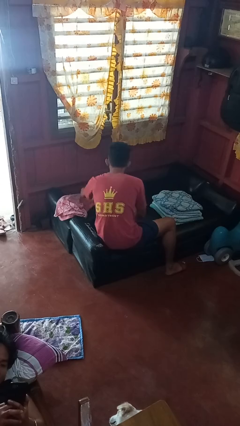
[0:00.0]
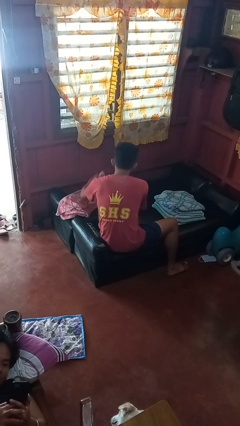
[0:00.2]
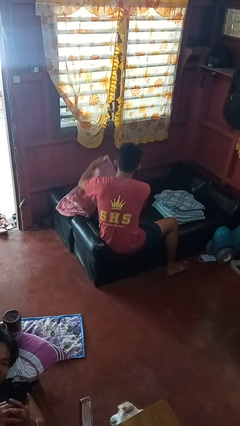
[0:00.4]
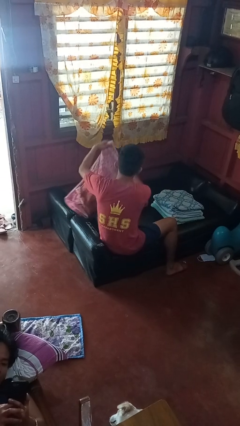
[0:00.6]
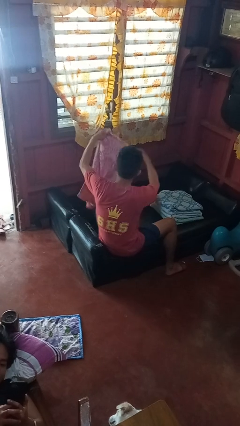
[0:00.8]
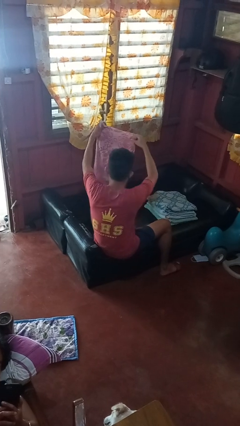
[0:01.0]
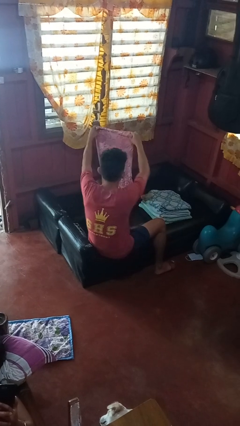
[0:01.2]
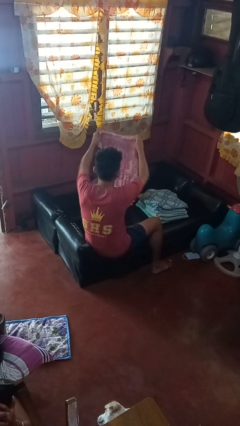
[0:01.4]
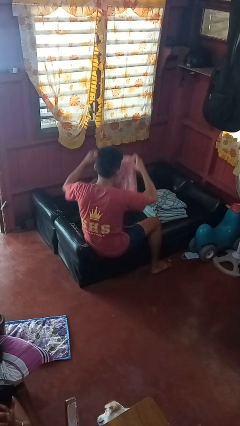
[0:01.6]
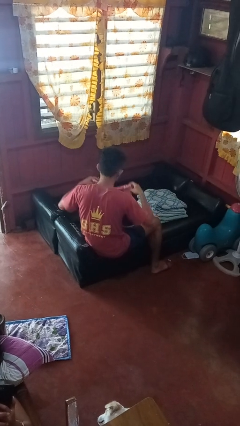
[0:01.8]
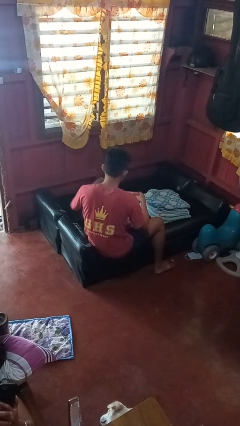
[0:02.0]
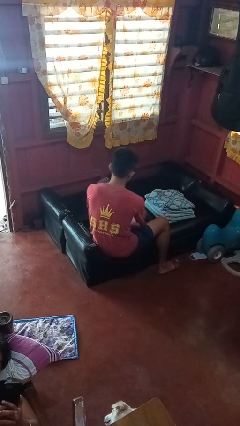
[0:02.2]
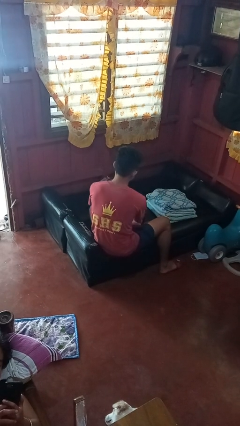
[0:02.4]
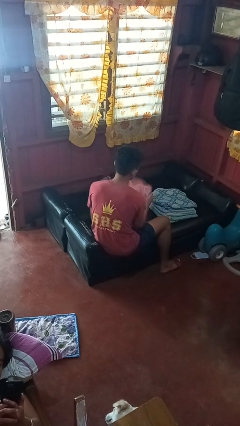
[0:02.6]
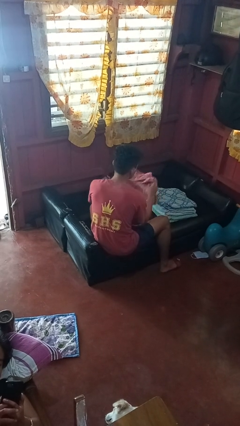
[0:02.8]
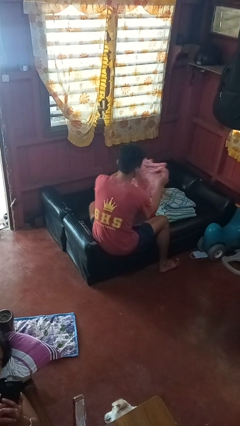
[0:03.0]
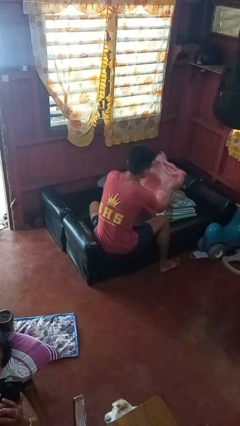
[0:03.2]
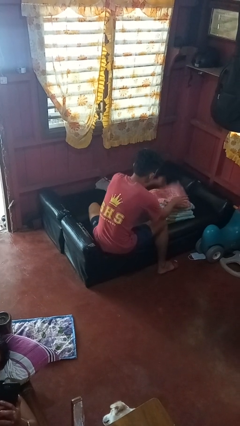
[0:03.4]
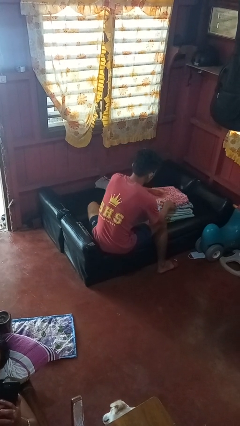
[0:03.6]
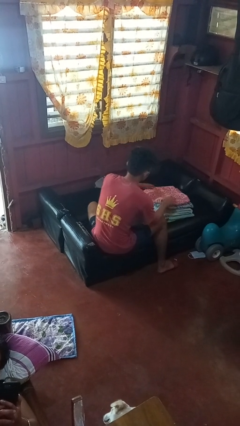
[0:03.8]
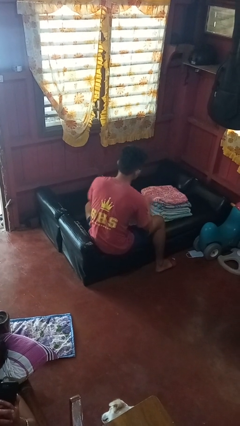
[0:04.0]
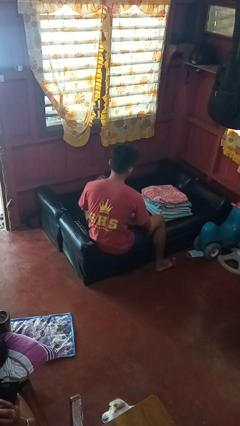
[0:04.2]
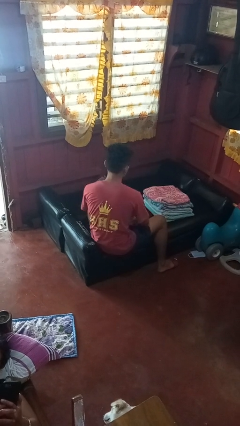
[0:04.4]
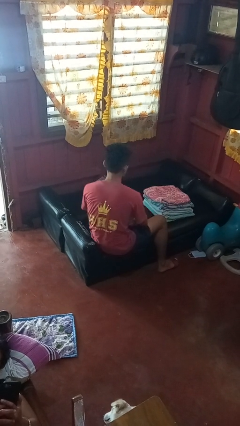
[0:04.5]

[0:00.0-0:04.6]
person folds towel

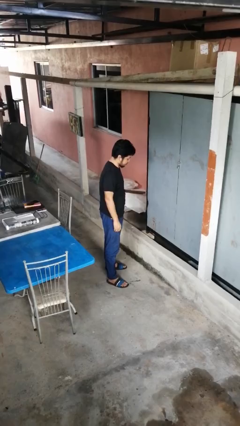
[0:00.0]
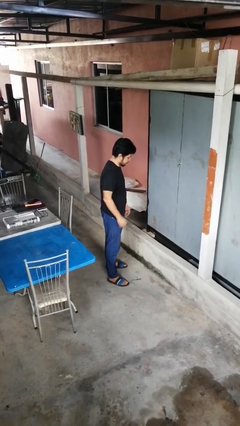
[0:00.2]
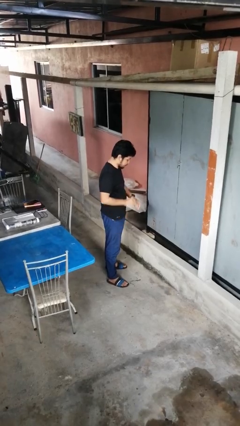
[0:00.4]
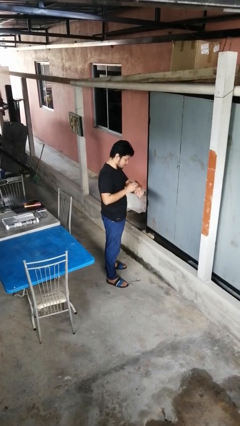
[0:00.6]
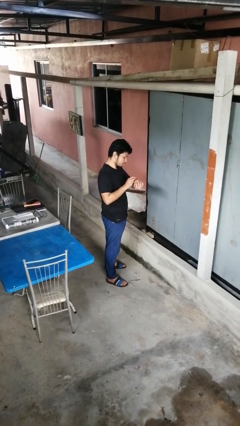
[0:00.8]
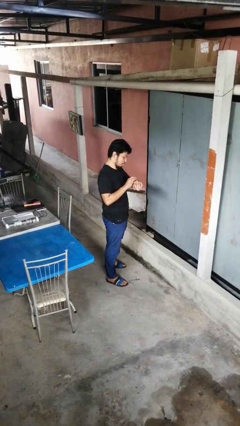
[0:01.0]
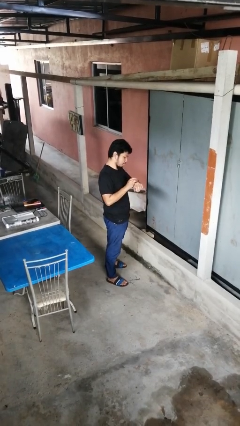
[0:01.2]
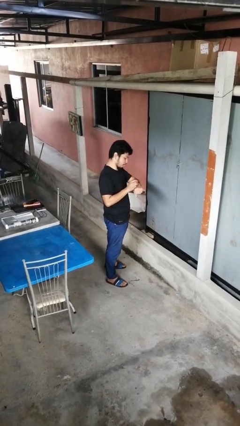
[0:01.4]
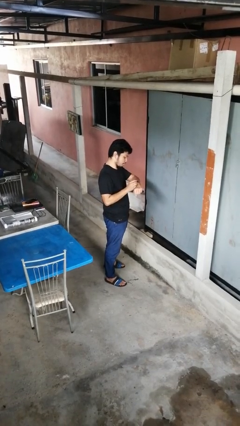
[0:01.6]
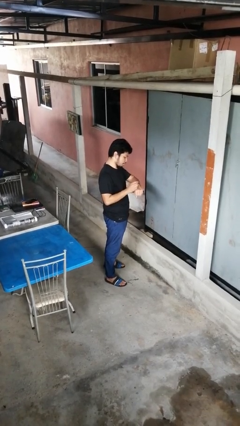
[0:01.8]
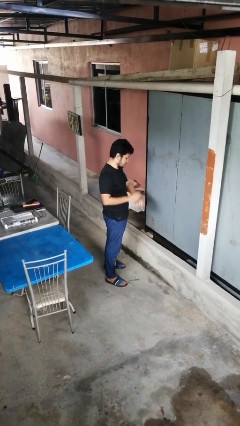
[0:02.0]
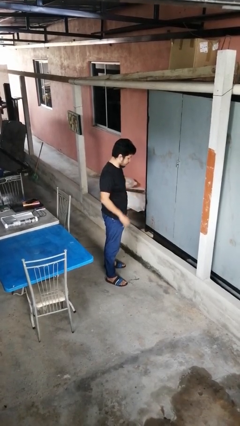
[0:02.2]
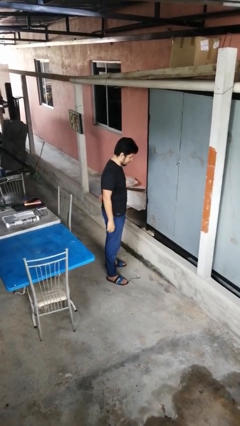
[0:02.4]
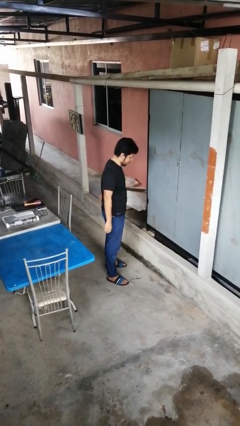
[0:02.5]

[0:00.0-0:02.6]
person looks at wristwatch

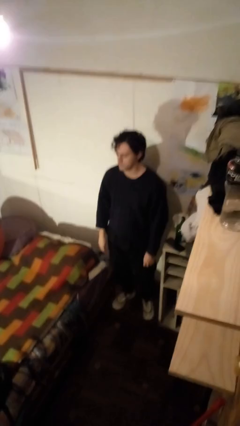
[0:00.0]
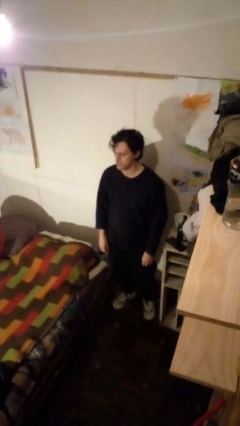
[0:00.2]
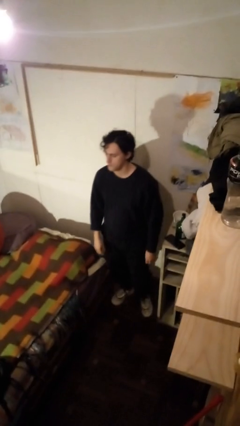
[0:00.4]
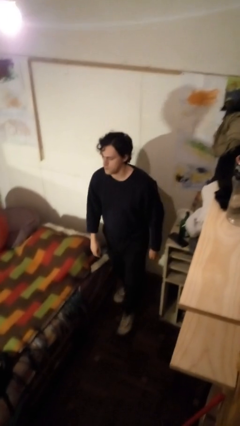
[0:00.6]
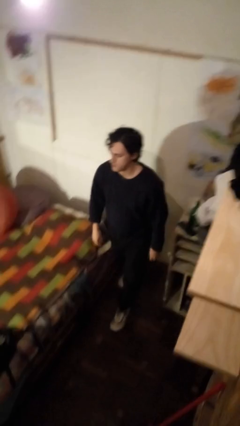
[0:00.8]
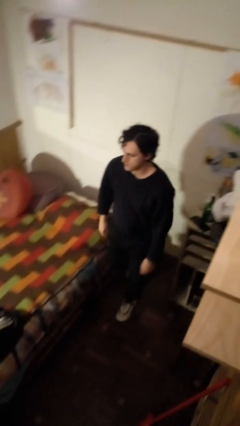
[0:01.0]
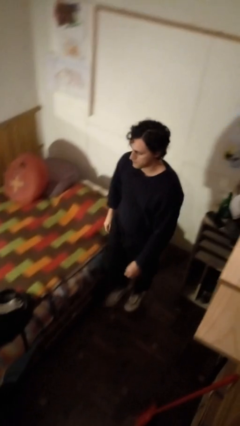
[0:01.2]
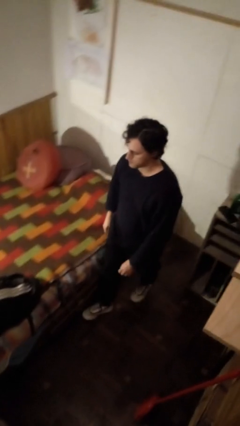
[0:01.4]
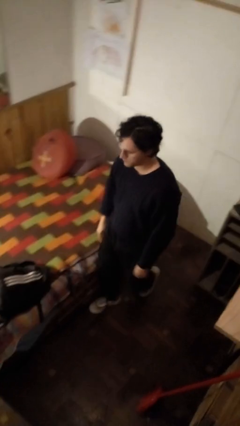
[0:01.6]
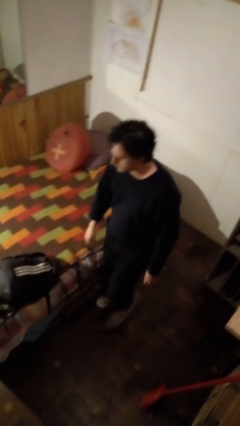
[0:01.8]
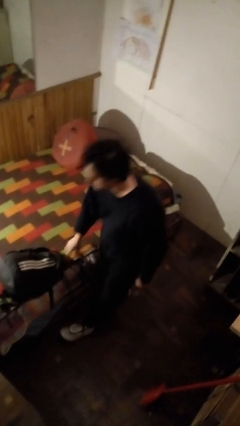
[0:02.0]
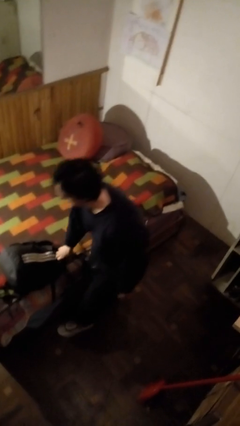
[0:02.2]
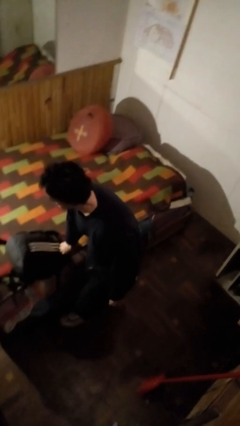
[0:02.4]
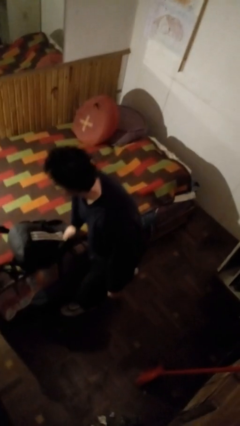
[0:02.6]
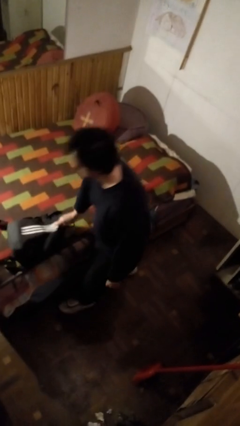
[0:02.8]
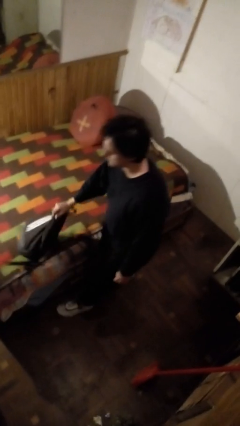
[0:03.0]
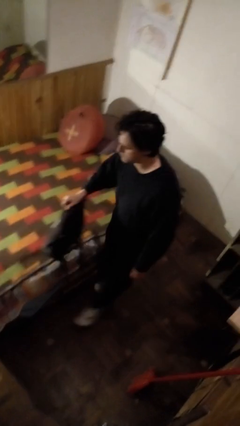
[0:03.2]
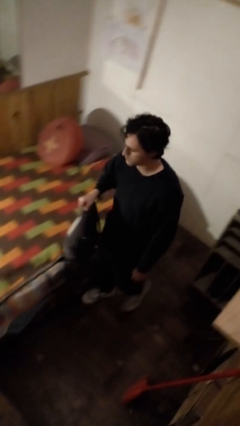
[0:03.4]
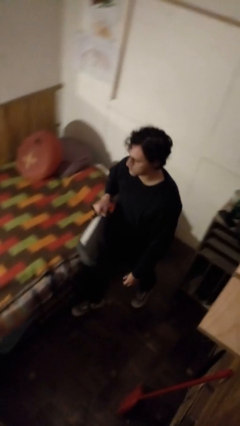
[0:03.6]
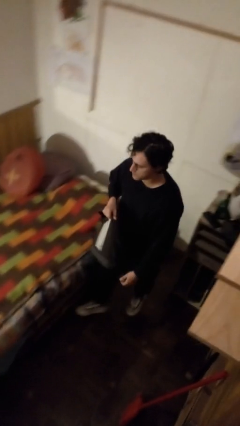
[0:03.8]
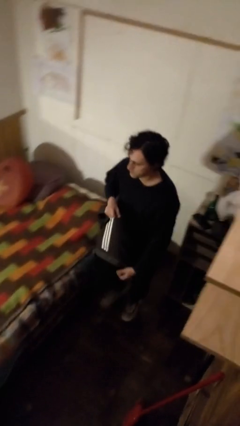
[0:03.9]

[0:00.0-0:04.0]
person picks up object from bed

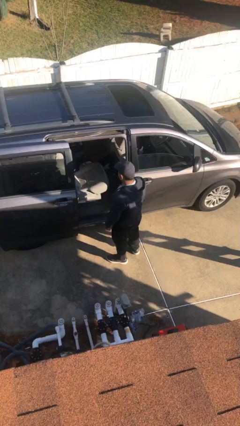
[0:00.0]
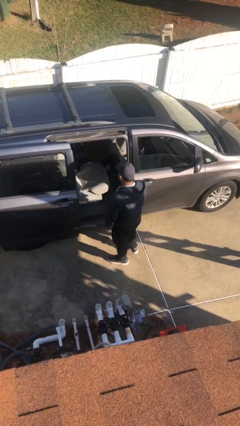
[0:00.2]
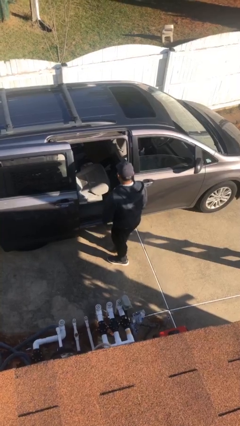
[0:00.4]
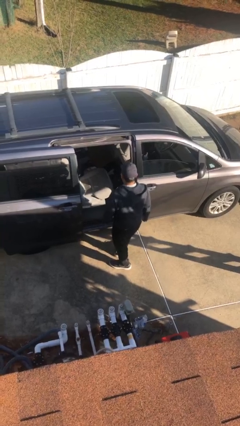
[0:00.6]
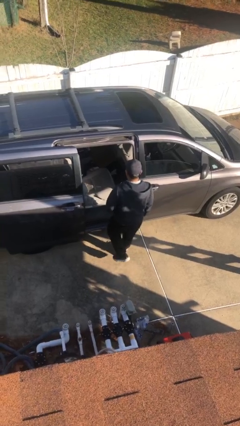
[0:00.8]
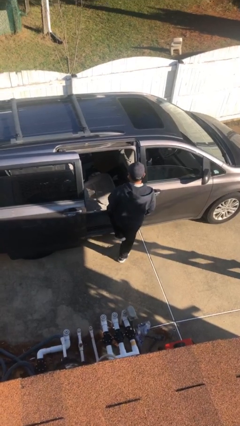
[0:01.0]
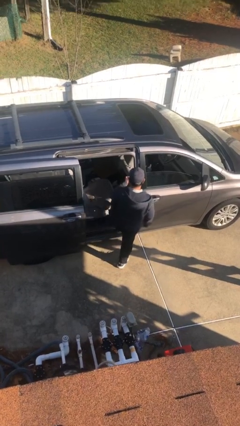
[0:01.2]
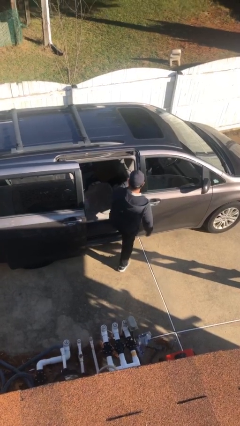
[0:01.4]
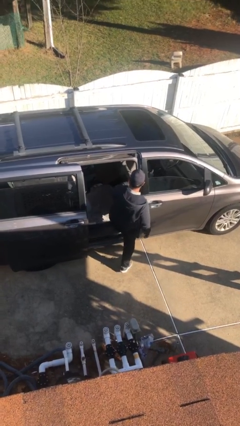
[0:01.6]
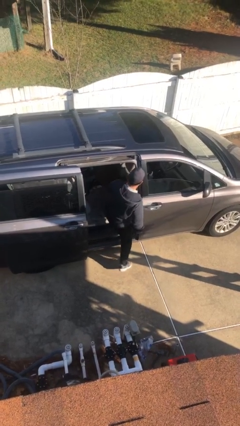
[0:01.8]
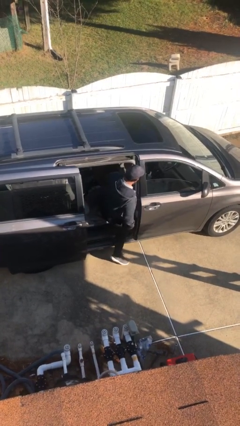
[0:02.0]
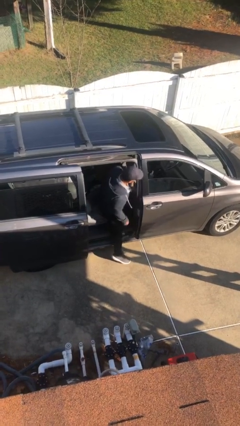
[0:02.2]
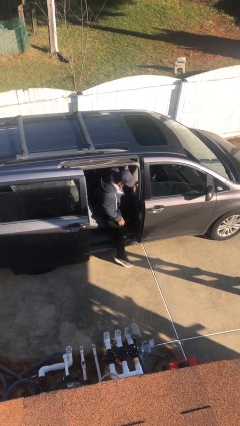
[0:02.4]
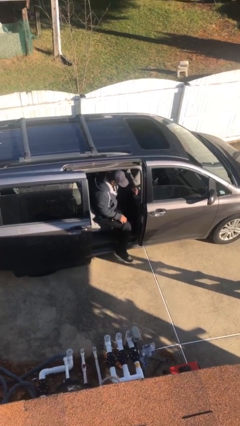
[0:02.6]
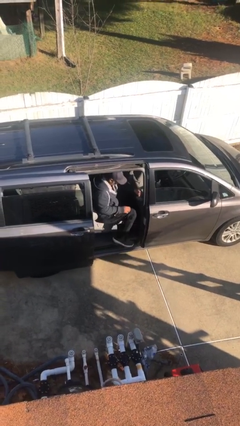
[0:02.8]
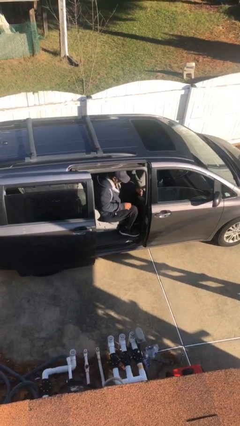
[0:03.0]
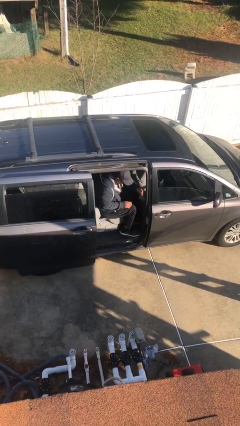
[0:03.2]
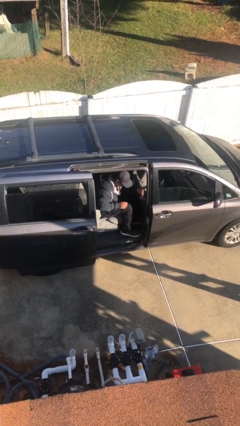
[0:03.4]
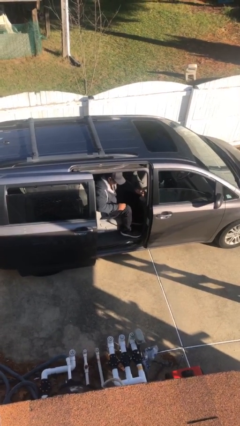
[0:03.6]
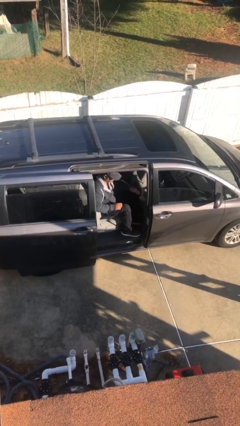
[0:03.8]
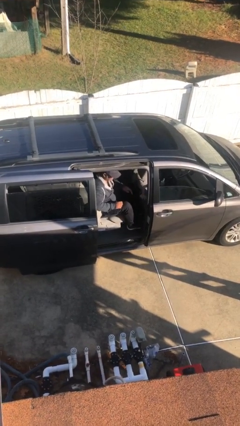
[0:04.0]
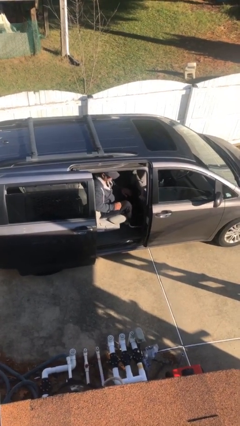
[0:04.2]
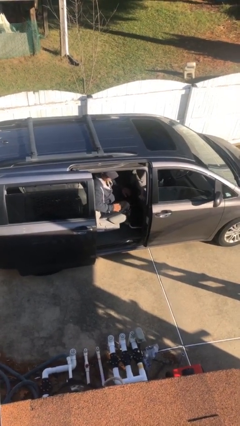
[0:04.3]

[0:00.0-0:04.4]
person enters car

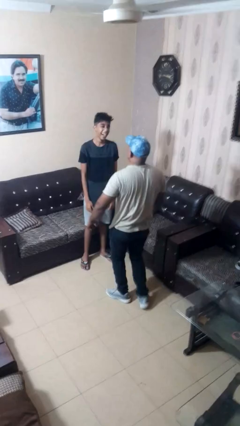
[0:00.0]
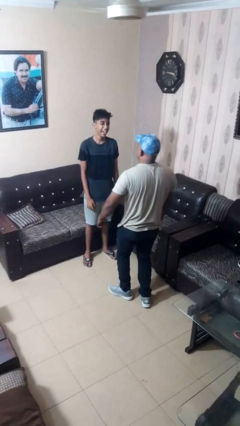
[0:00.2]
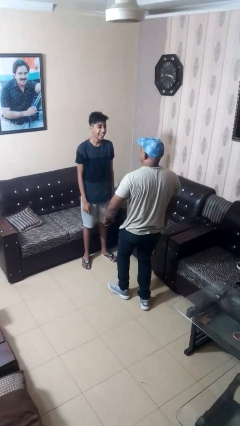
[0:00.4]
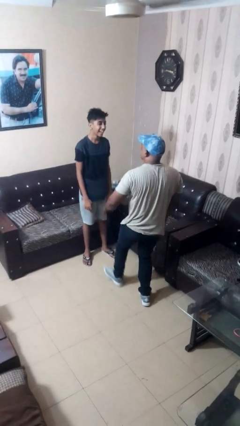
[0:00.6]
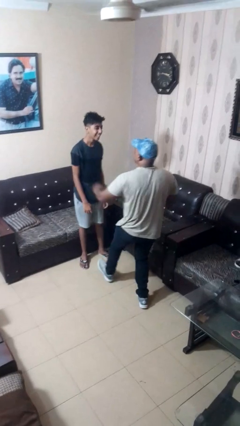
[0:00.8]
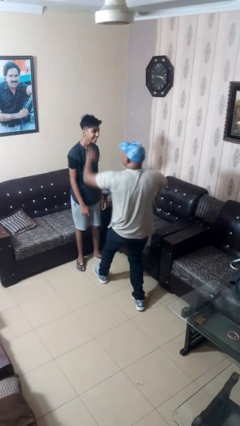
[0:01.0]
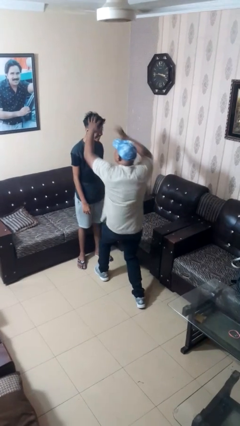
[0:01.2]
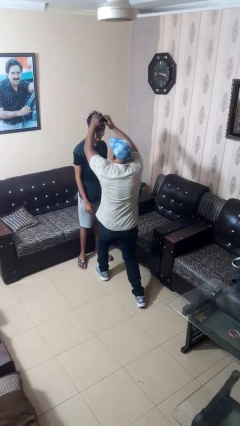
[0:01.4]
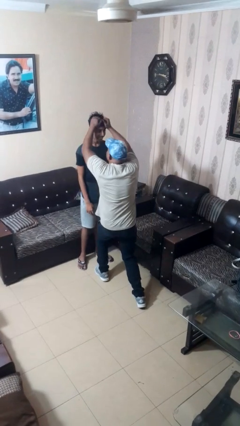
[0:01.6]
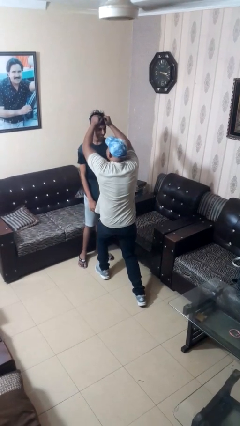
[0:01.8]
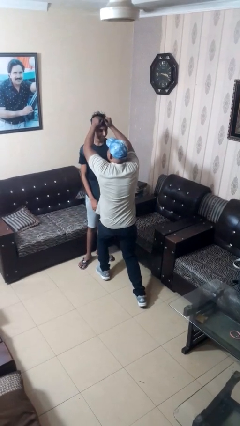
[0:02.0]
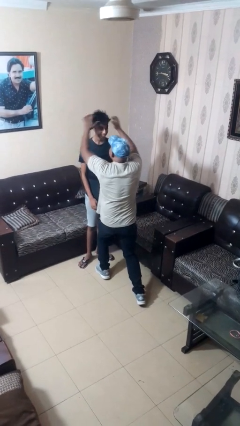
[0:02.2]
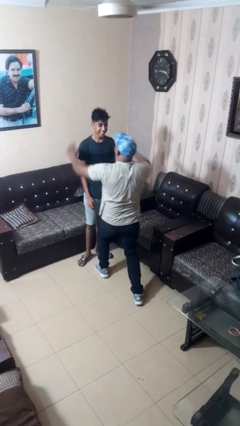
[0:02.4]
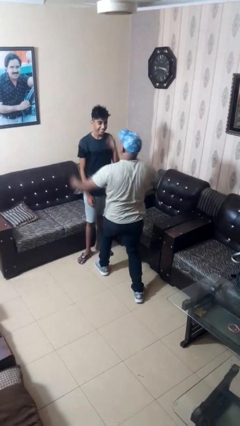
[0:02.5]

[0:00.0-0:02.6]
person grabs person by hair
